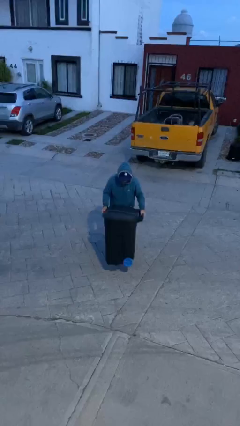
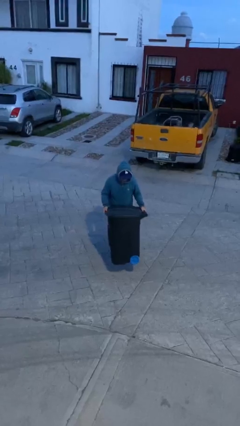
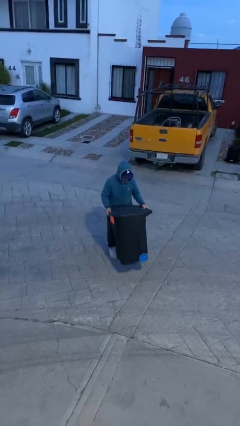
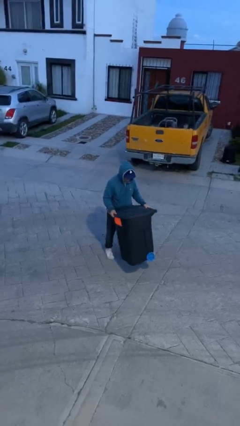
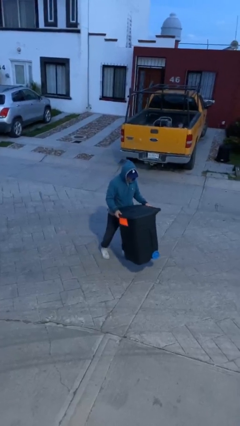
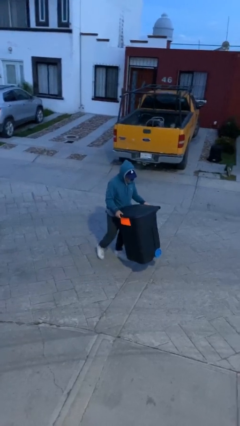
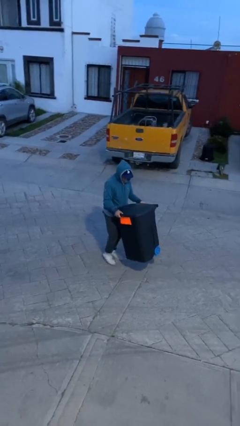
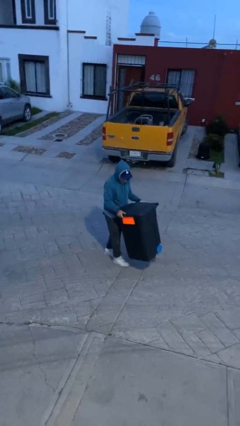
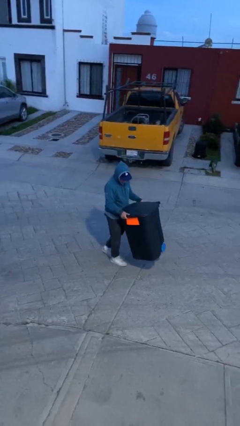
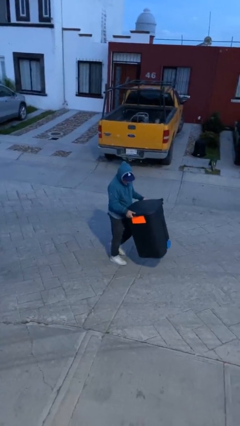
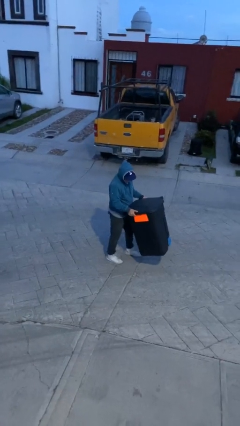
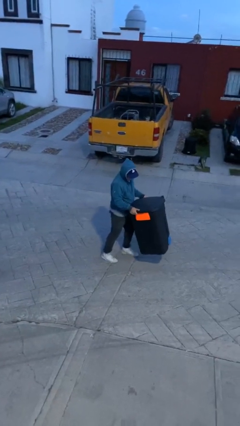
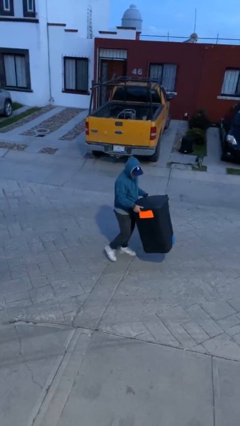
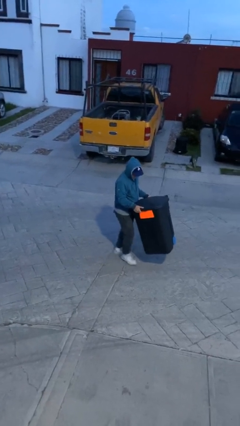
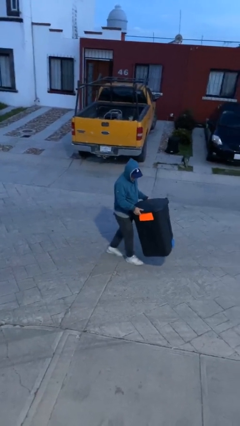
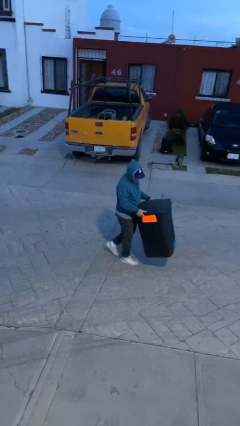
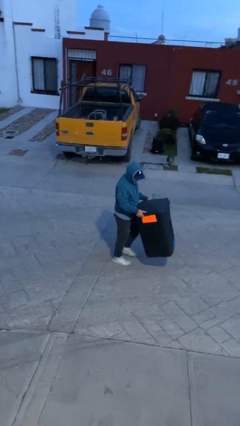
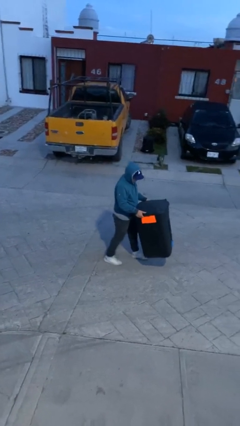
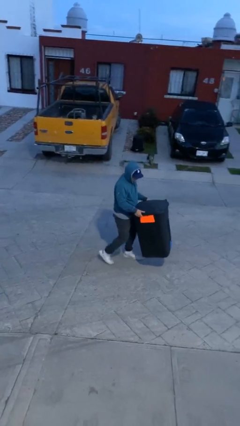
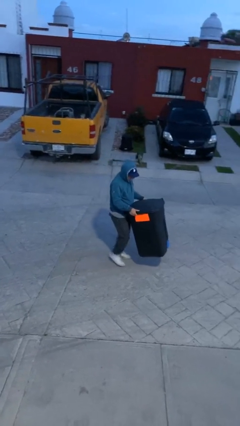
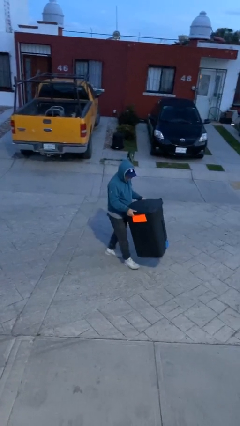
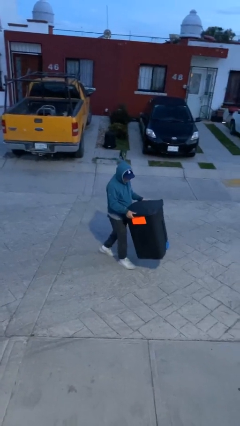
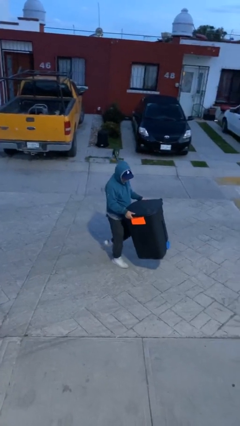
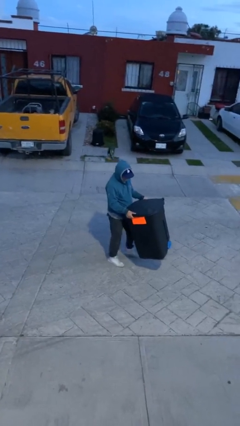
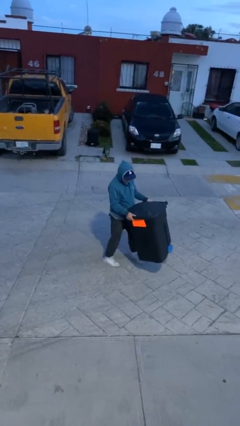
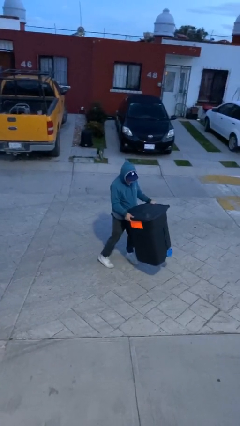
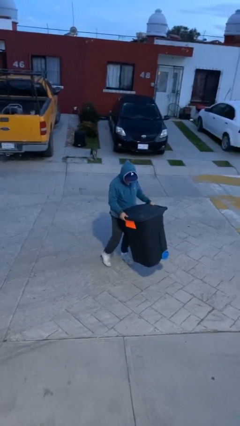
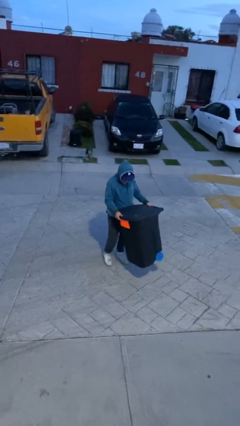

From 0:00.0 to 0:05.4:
person carries heavy object

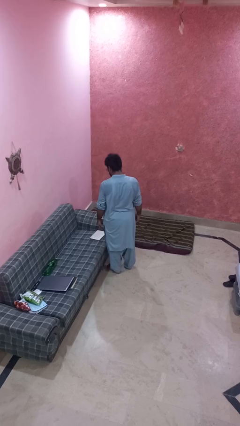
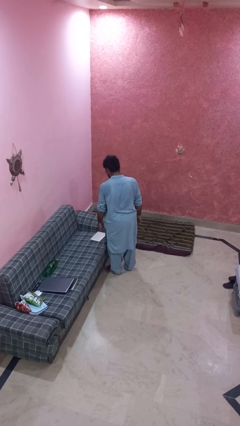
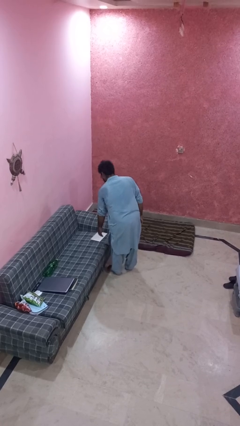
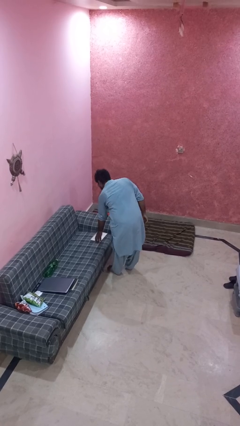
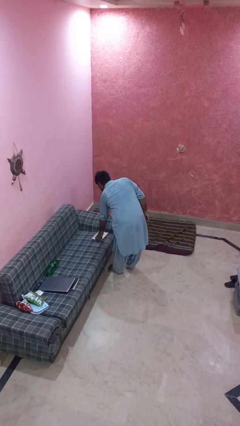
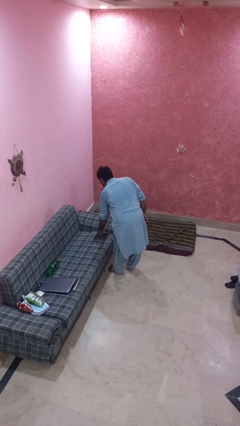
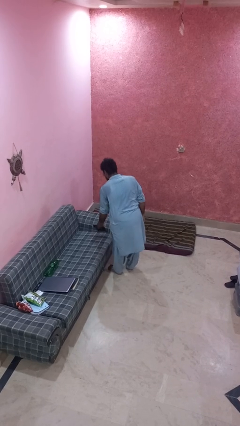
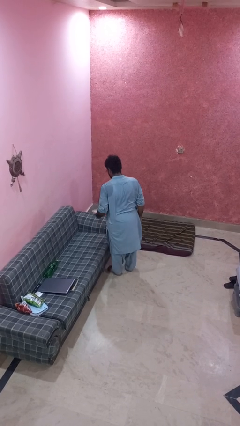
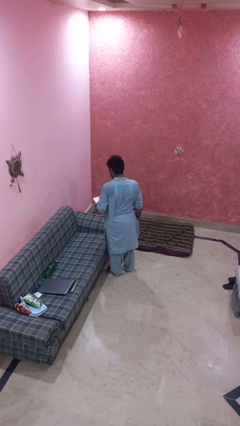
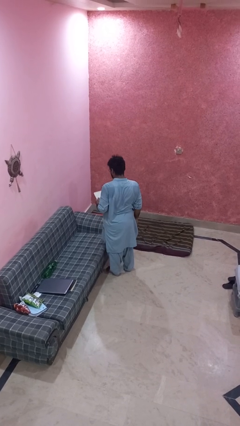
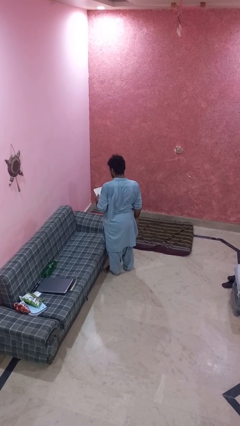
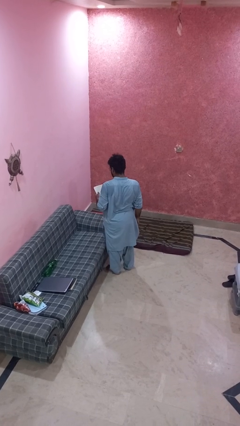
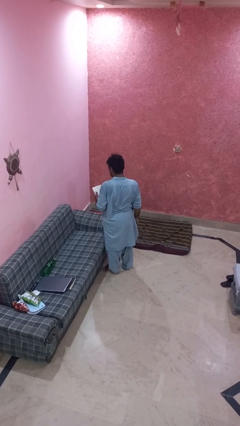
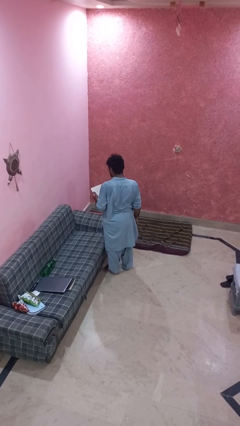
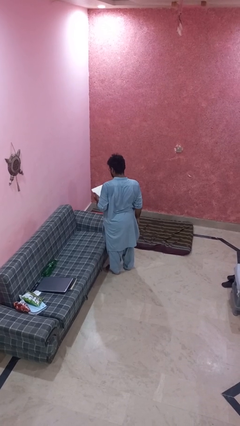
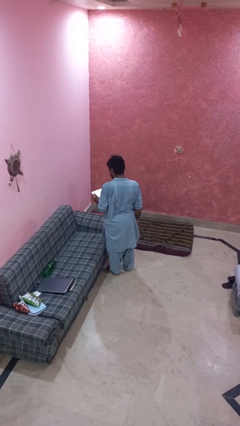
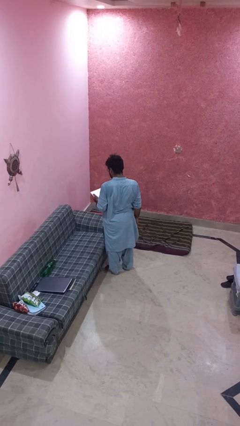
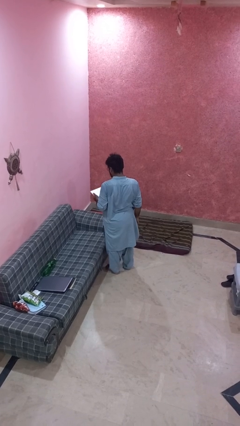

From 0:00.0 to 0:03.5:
person picks up object from couch

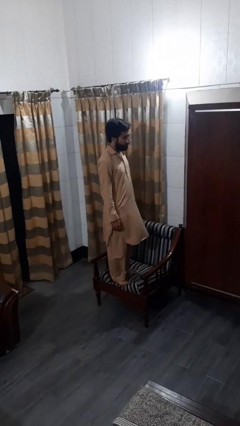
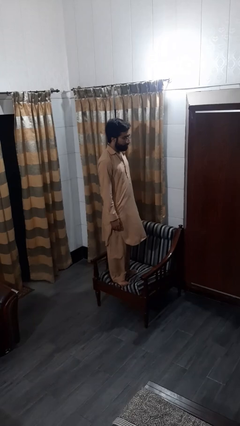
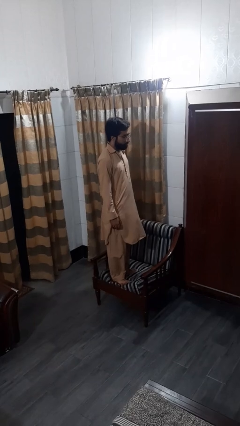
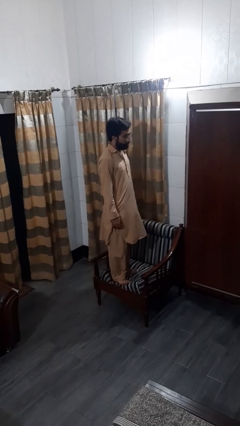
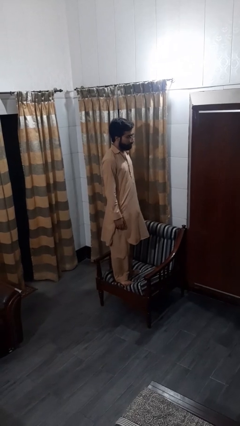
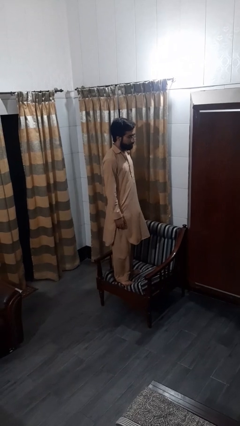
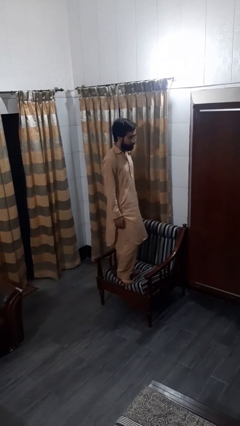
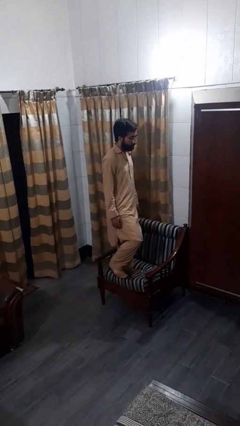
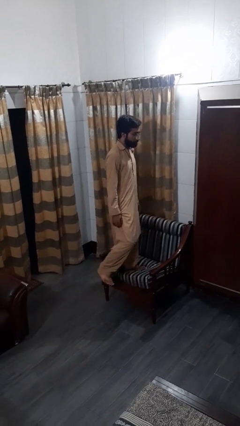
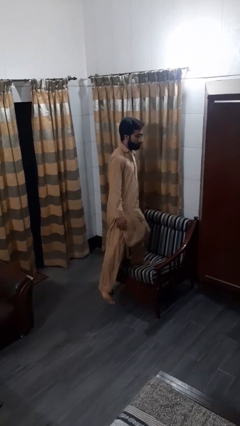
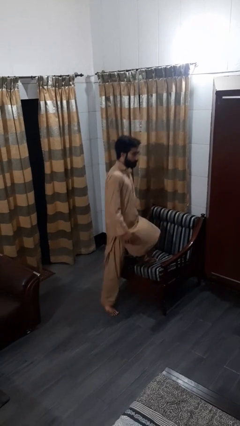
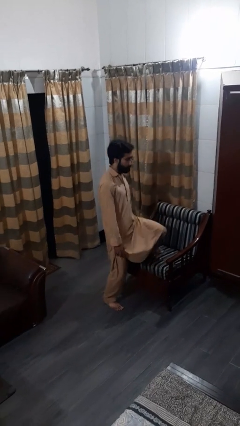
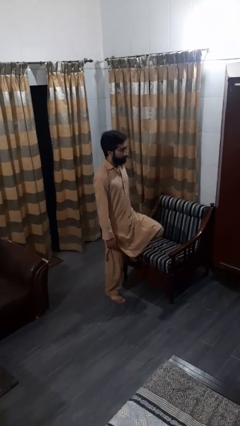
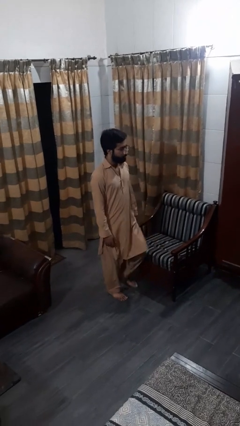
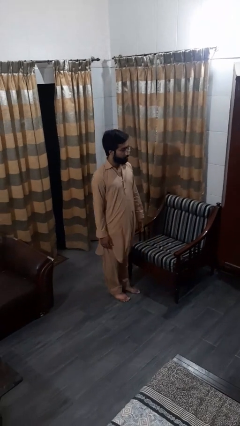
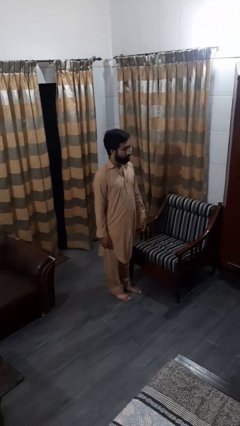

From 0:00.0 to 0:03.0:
person climbs off chair

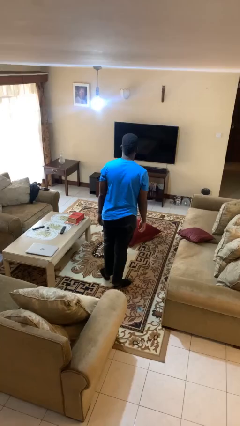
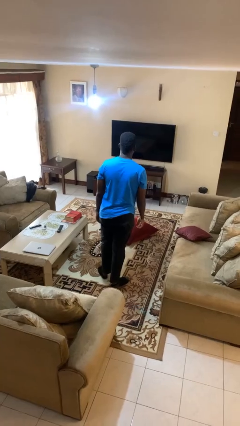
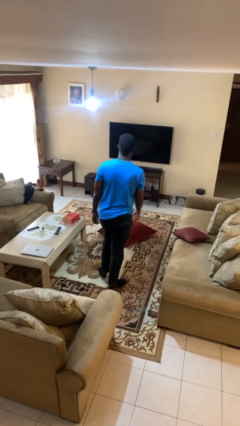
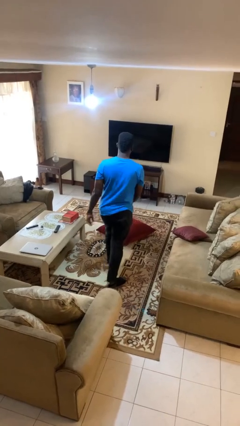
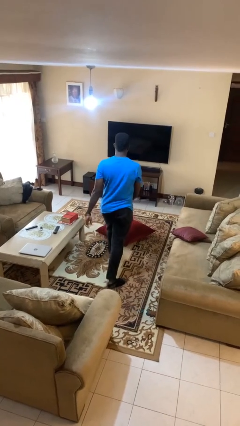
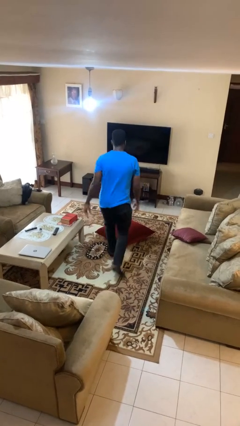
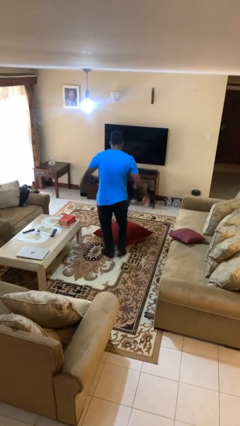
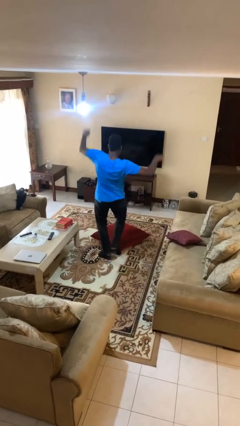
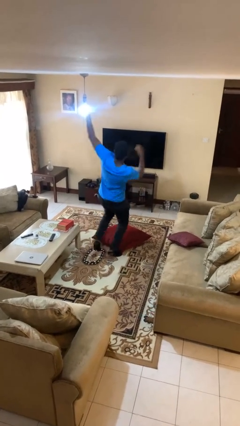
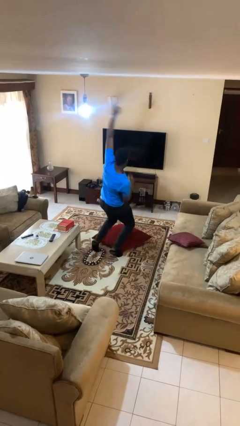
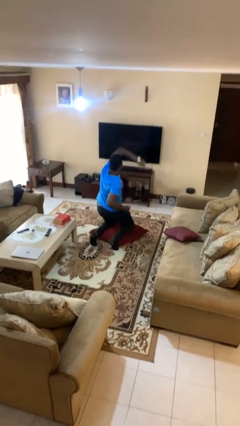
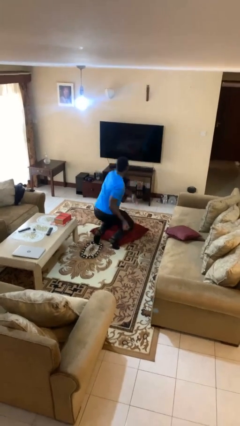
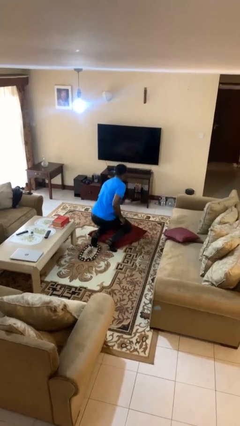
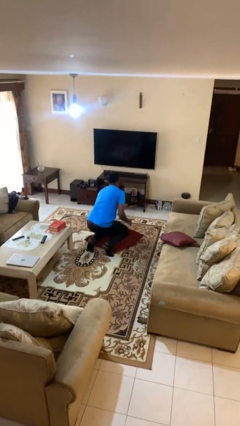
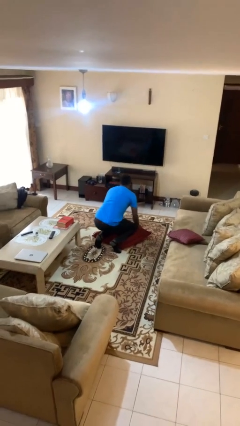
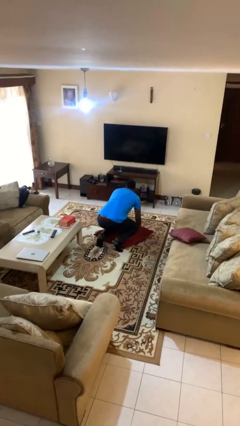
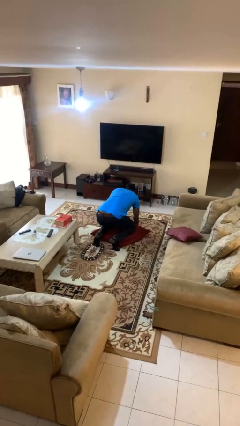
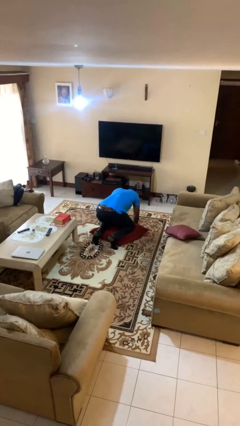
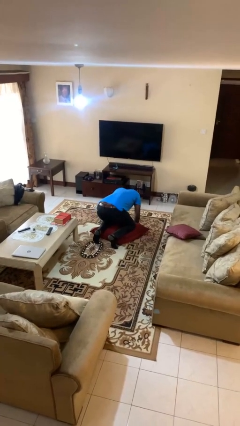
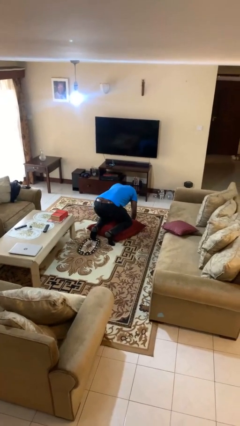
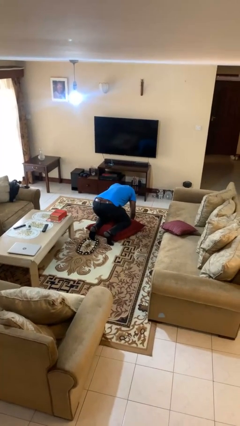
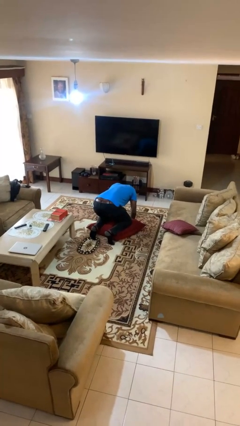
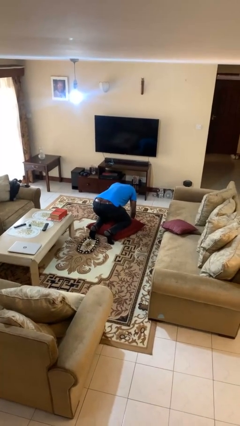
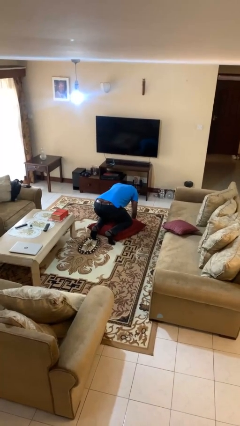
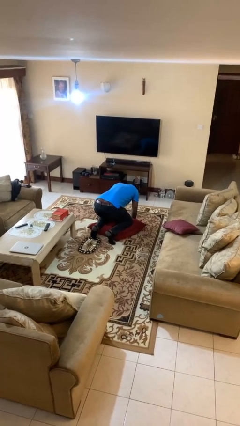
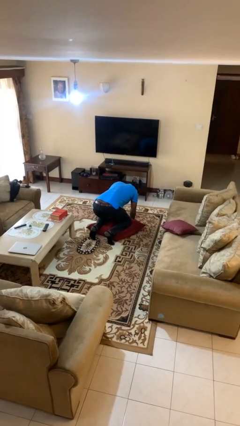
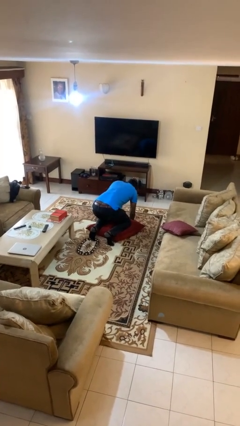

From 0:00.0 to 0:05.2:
person trips on object on floor

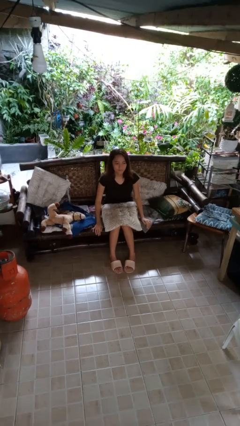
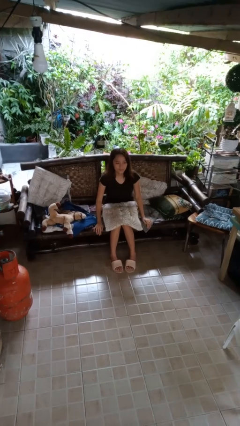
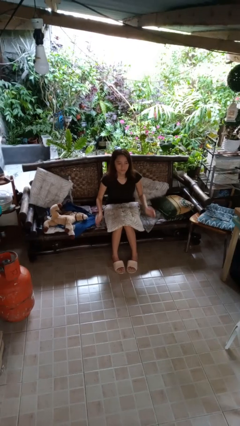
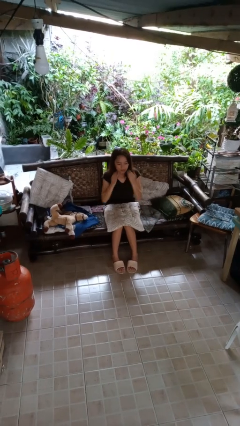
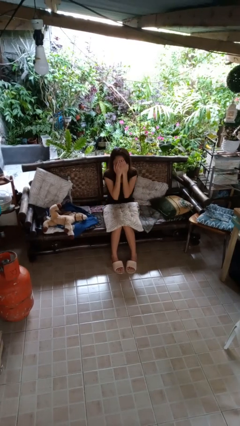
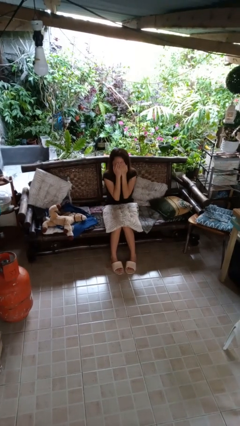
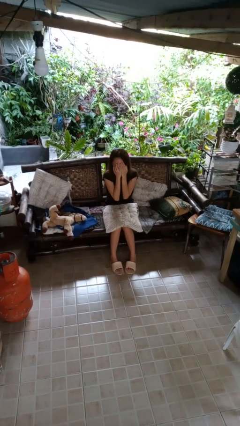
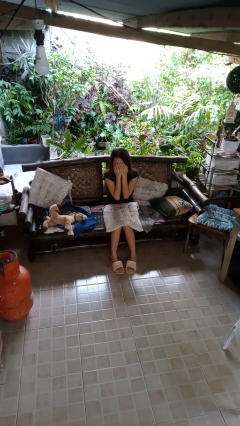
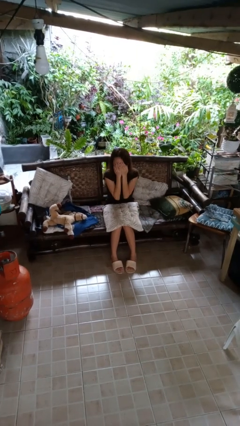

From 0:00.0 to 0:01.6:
person covers face with hands
